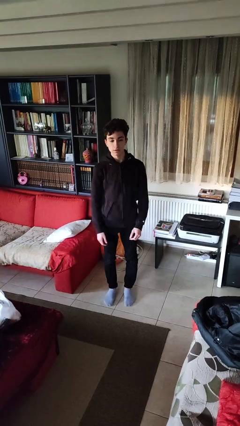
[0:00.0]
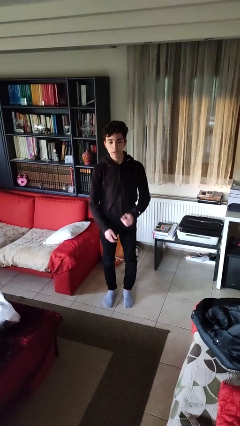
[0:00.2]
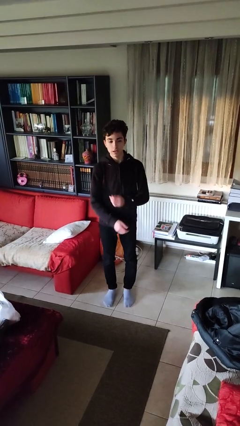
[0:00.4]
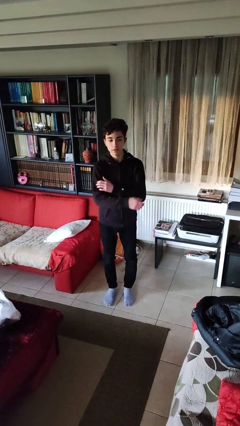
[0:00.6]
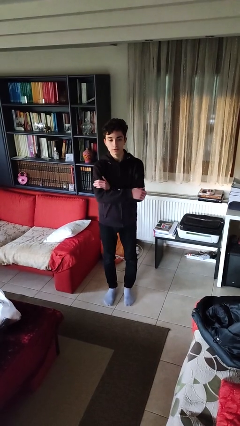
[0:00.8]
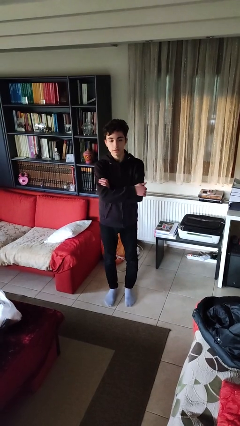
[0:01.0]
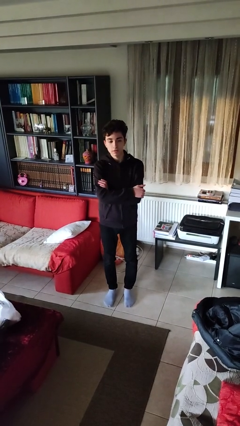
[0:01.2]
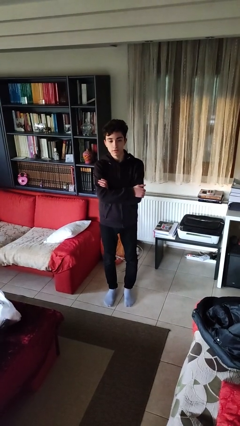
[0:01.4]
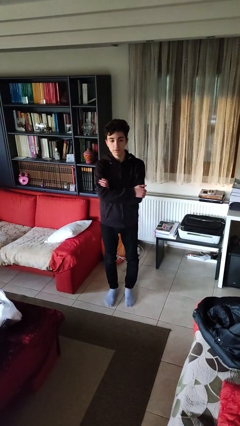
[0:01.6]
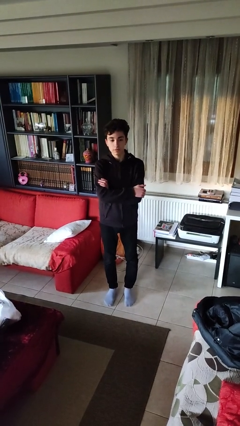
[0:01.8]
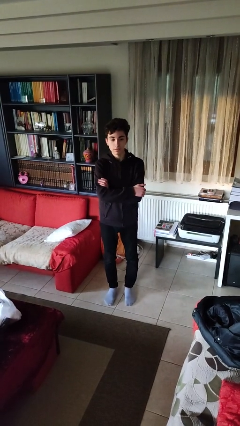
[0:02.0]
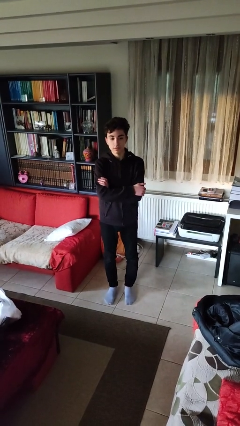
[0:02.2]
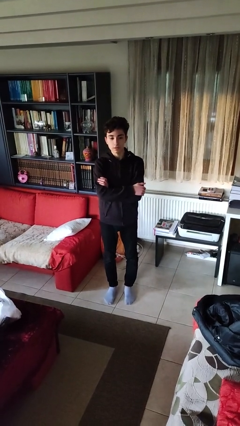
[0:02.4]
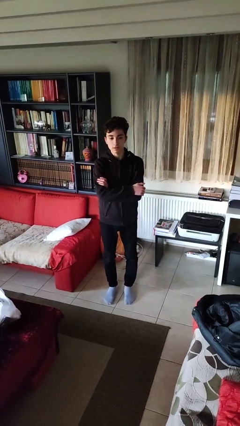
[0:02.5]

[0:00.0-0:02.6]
person crosses arms

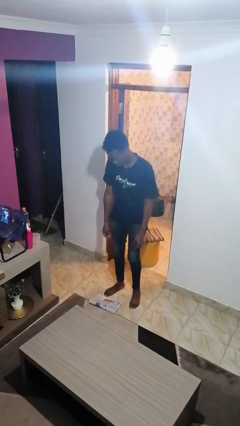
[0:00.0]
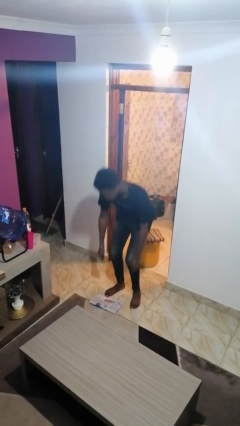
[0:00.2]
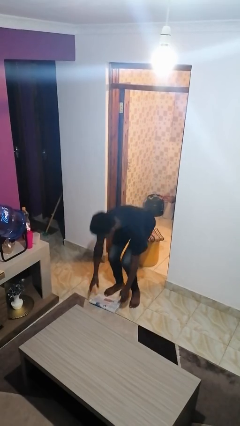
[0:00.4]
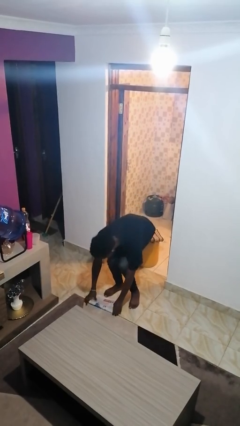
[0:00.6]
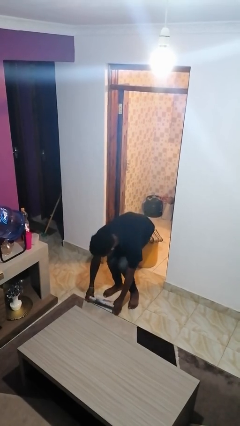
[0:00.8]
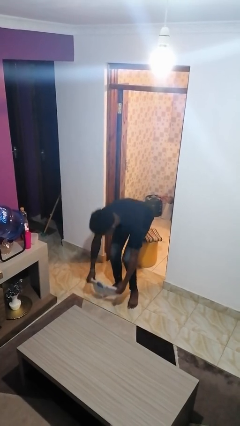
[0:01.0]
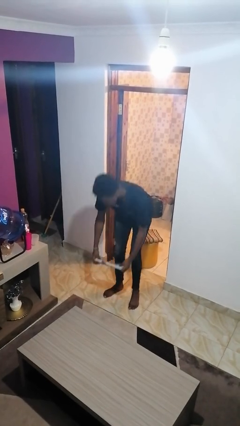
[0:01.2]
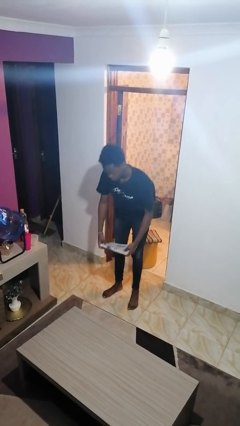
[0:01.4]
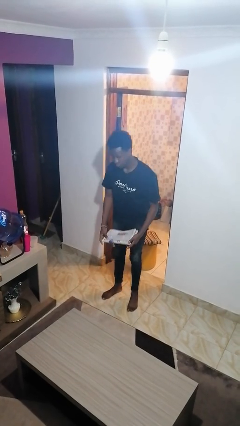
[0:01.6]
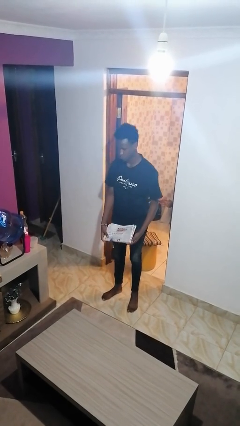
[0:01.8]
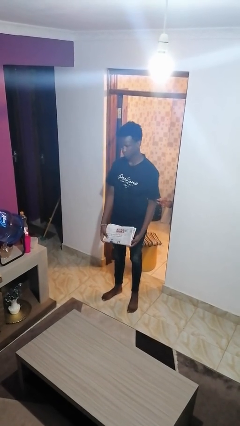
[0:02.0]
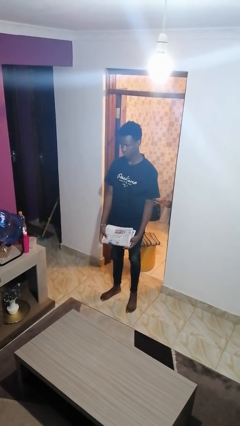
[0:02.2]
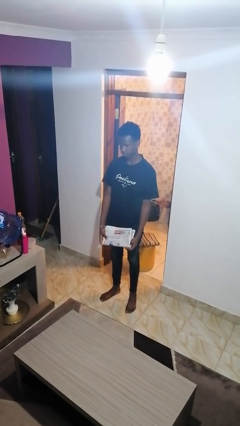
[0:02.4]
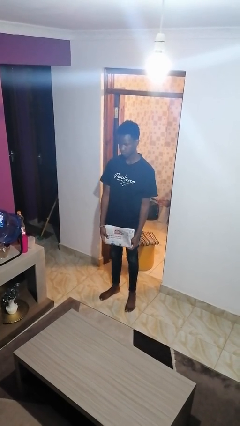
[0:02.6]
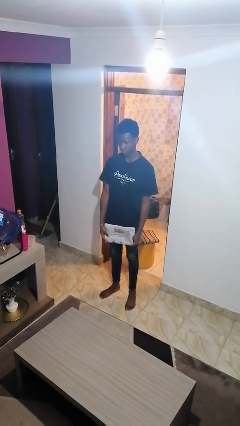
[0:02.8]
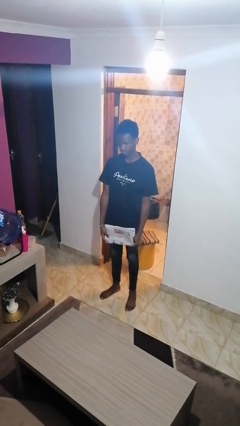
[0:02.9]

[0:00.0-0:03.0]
person picks up object from floor

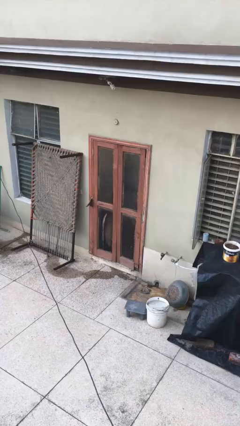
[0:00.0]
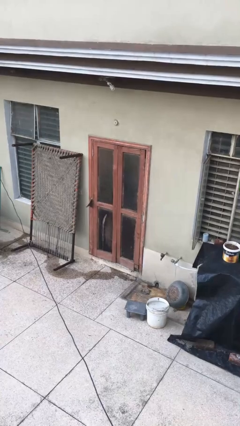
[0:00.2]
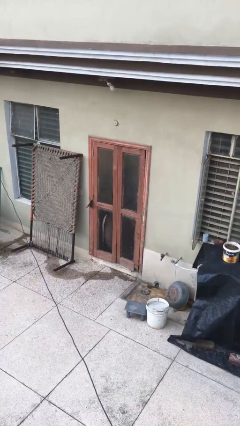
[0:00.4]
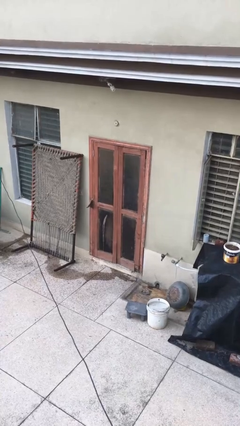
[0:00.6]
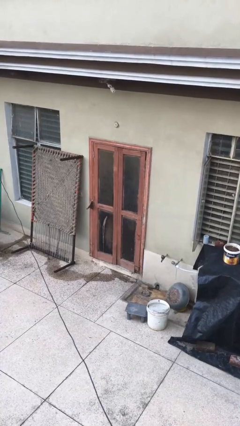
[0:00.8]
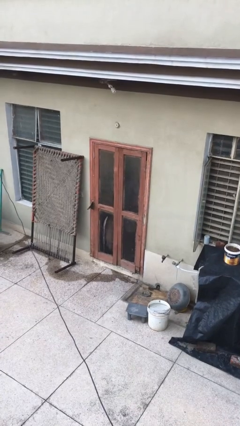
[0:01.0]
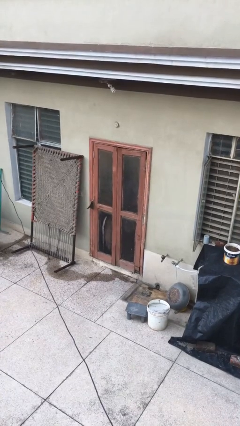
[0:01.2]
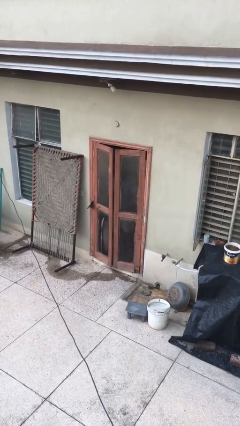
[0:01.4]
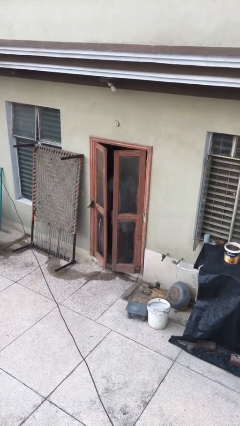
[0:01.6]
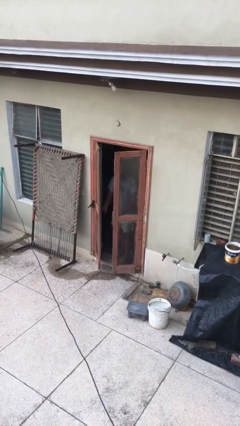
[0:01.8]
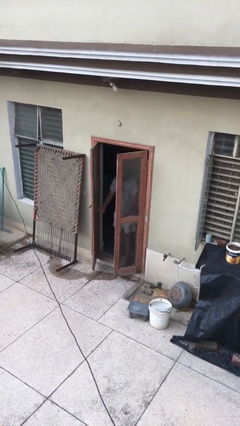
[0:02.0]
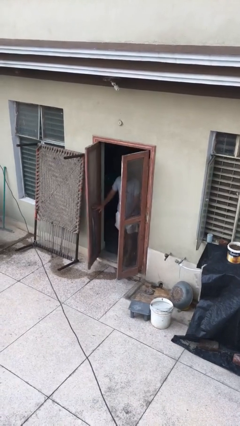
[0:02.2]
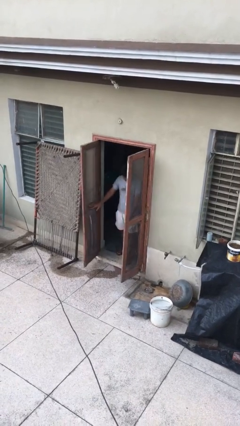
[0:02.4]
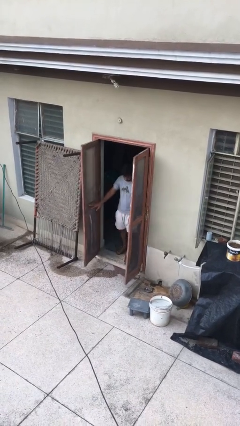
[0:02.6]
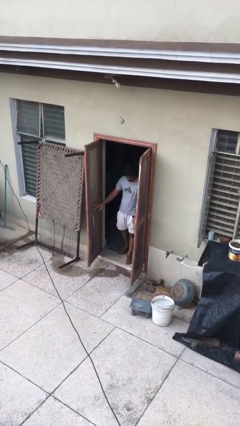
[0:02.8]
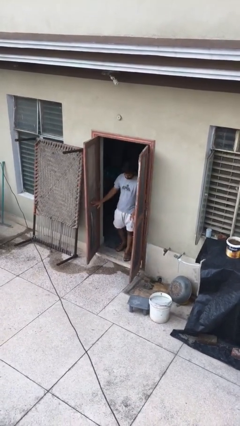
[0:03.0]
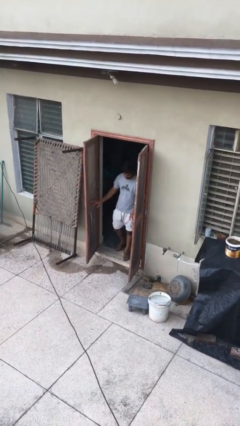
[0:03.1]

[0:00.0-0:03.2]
person opens facility door

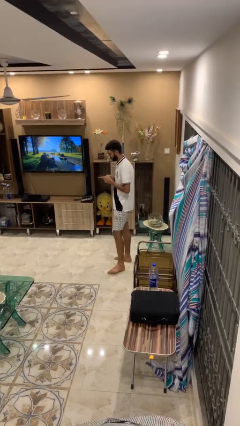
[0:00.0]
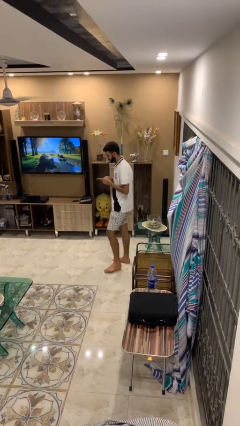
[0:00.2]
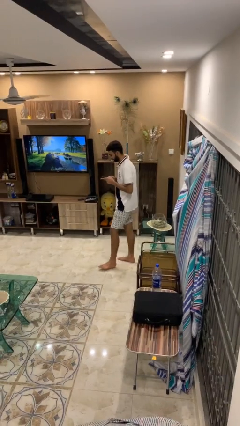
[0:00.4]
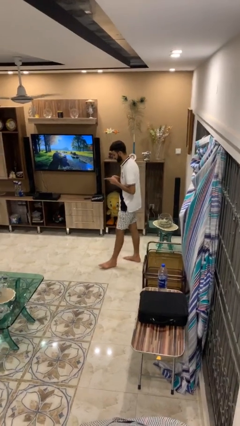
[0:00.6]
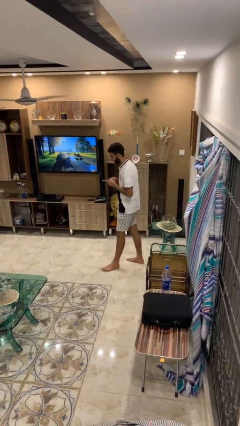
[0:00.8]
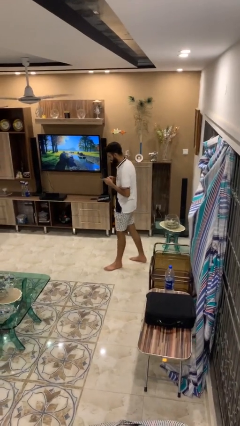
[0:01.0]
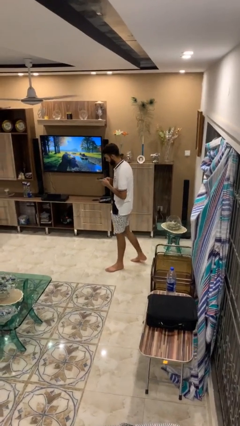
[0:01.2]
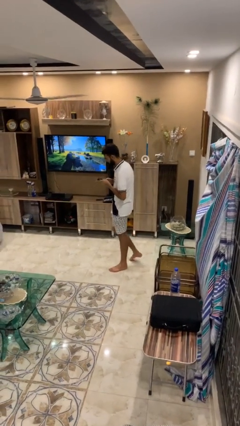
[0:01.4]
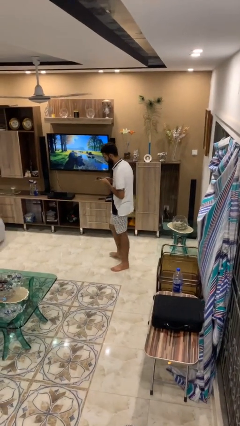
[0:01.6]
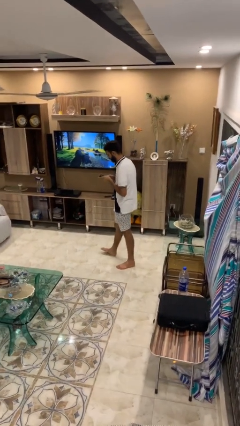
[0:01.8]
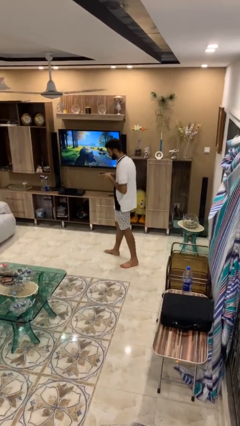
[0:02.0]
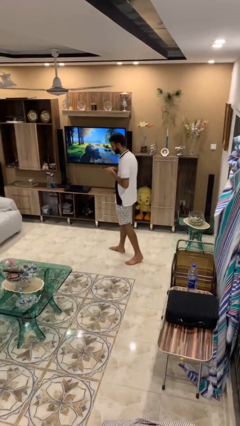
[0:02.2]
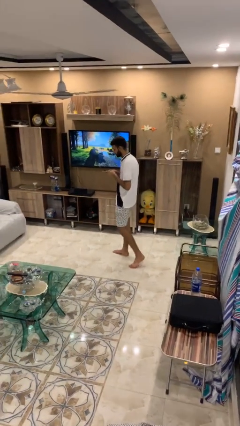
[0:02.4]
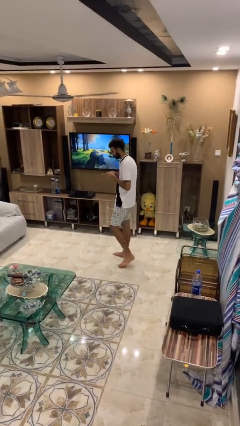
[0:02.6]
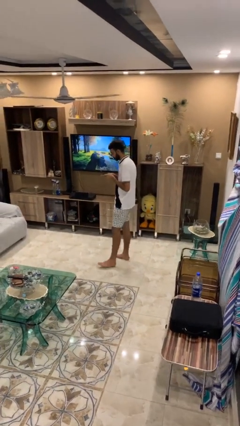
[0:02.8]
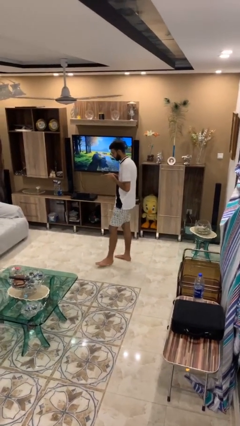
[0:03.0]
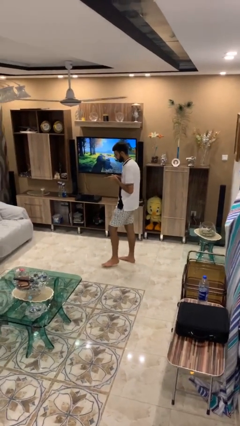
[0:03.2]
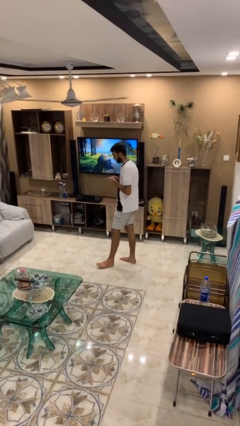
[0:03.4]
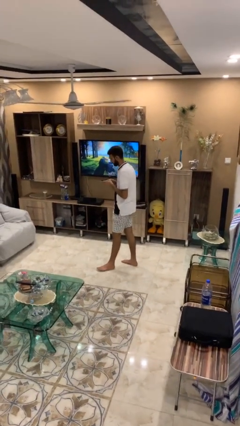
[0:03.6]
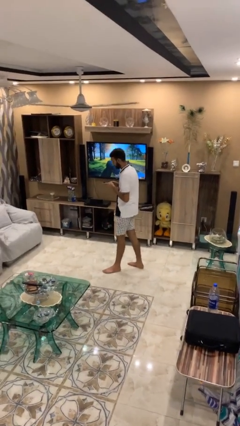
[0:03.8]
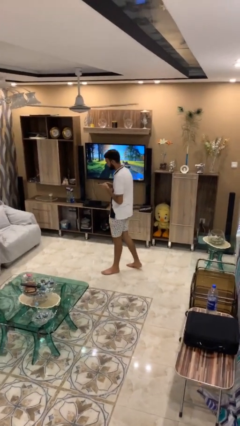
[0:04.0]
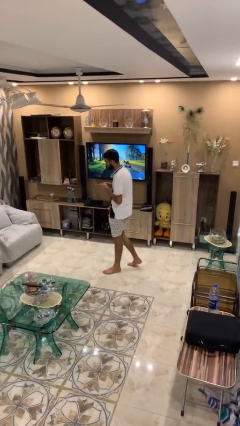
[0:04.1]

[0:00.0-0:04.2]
person texts on phone

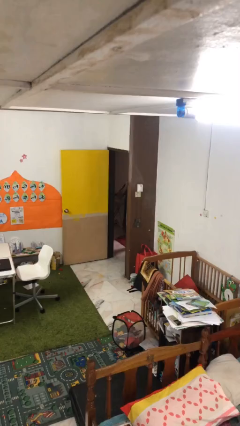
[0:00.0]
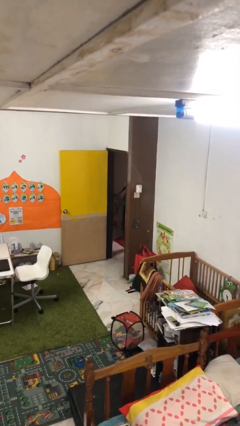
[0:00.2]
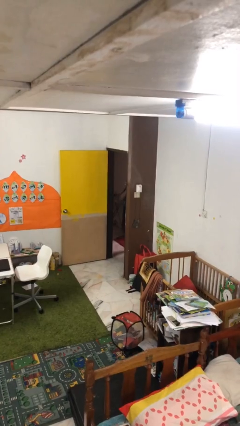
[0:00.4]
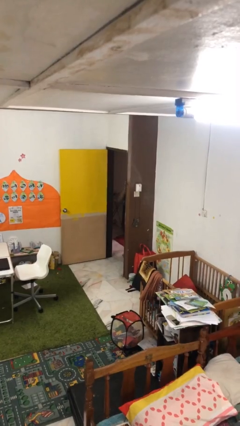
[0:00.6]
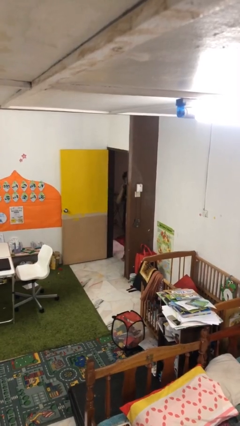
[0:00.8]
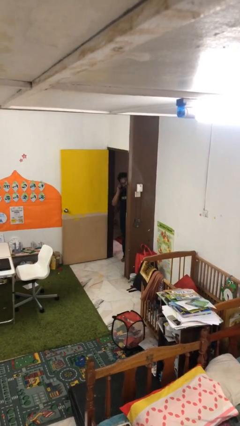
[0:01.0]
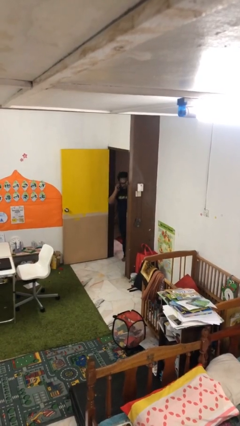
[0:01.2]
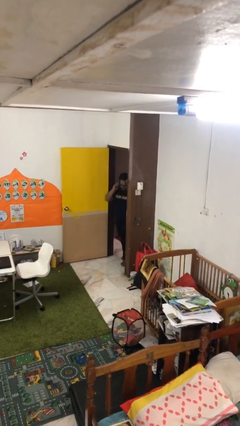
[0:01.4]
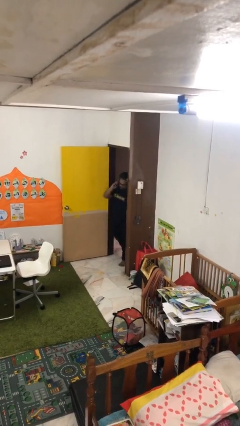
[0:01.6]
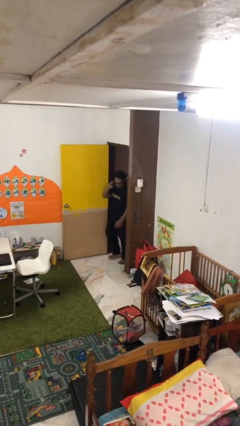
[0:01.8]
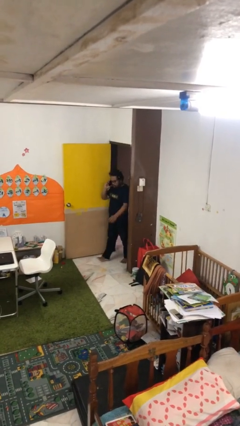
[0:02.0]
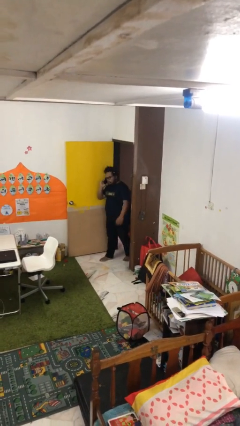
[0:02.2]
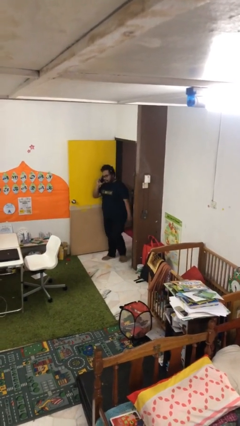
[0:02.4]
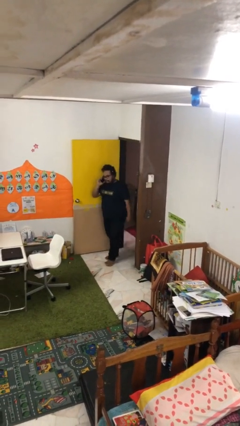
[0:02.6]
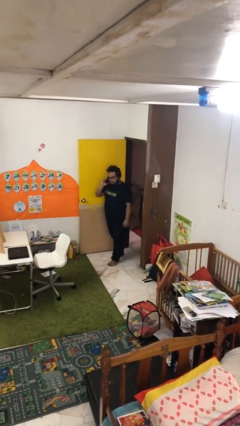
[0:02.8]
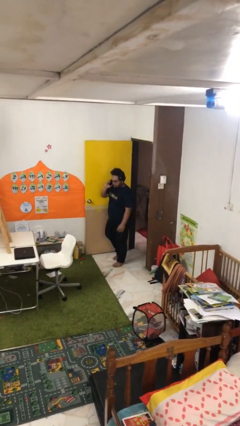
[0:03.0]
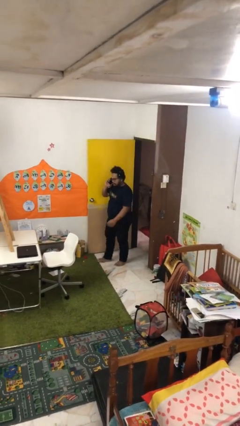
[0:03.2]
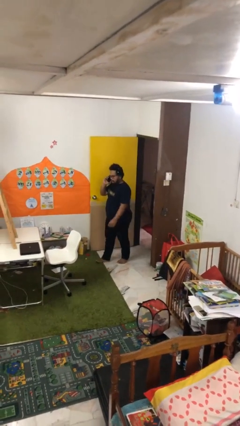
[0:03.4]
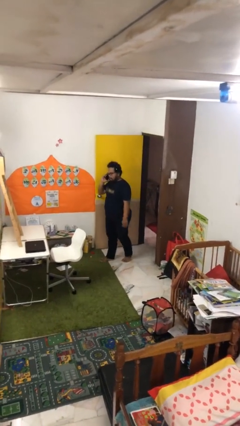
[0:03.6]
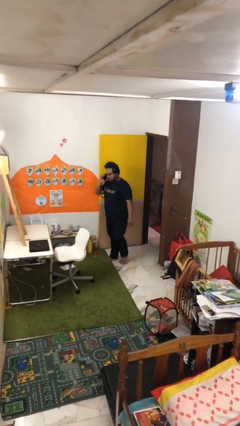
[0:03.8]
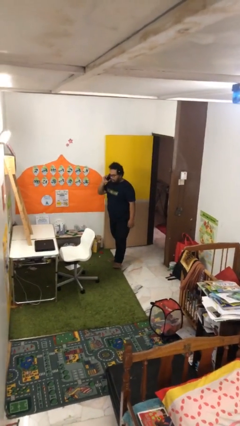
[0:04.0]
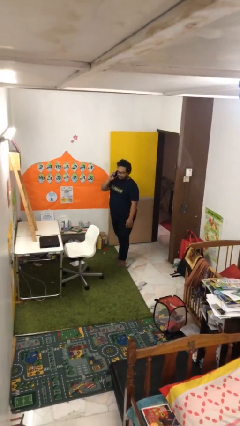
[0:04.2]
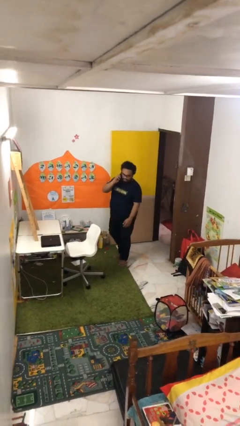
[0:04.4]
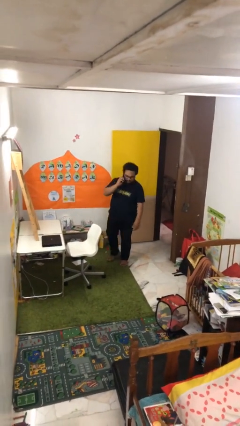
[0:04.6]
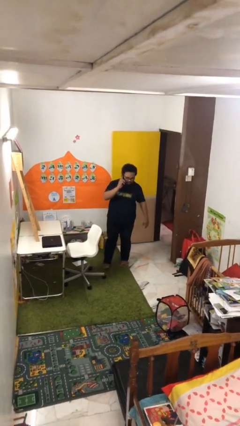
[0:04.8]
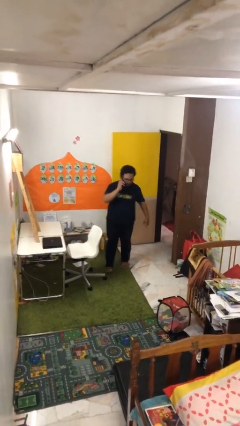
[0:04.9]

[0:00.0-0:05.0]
person enters scene through structure
